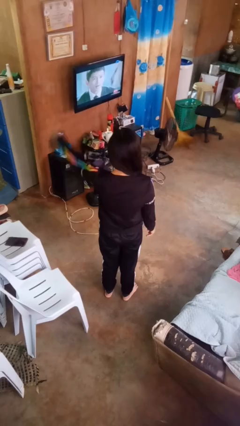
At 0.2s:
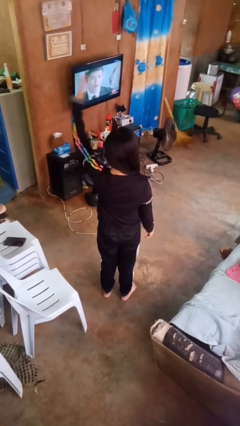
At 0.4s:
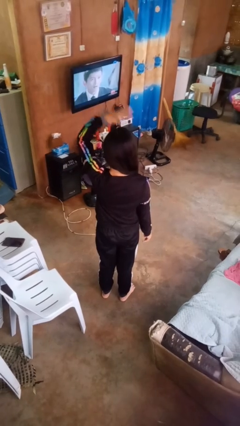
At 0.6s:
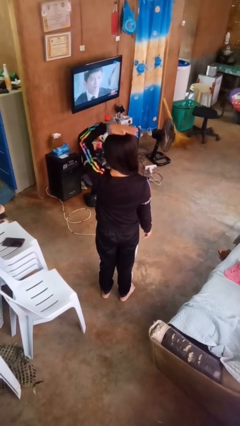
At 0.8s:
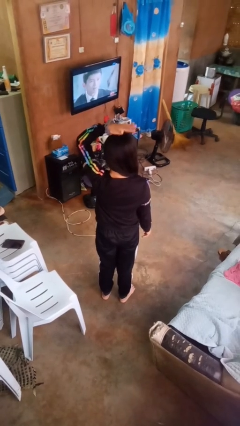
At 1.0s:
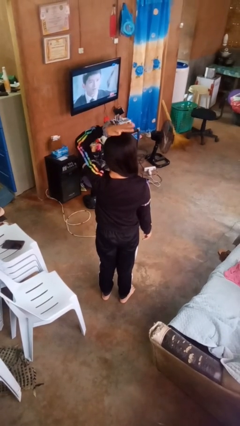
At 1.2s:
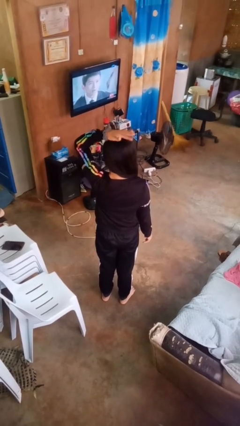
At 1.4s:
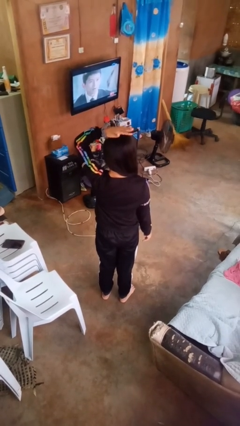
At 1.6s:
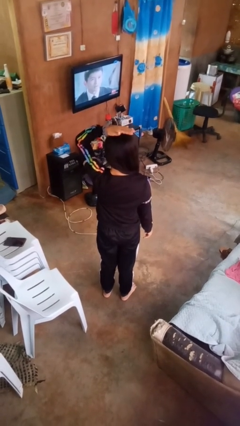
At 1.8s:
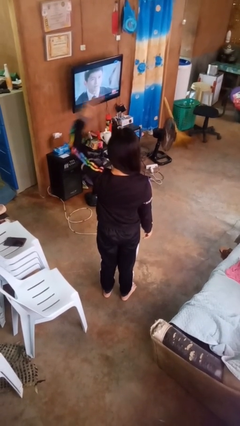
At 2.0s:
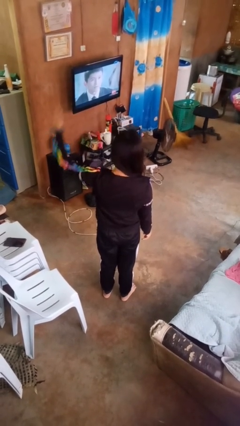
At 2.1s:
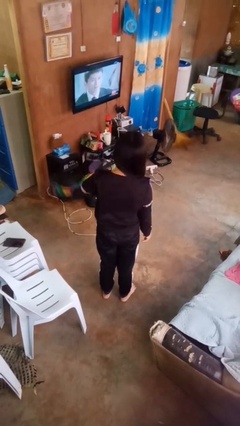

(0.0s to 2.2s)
person pats head

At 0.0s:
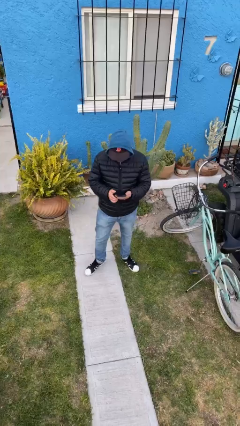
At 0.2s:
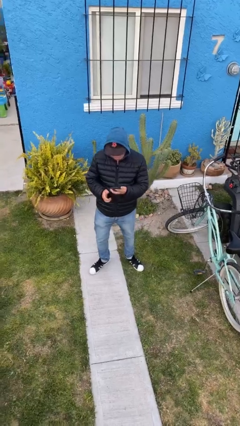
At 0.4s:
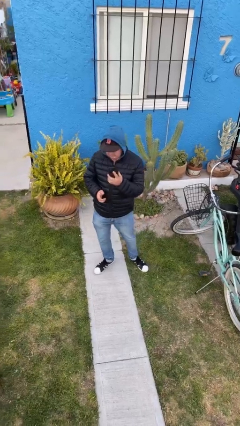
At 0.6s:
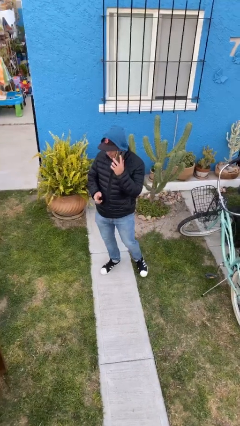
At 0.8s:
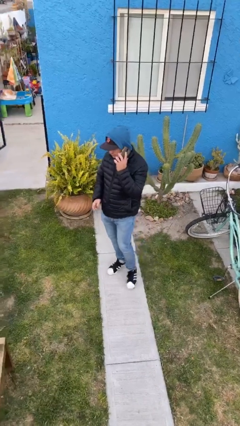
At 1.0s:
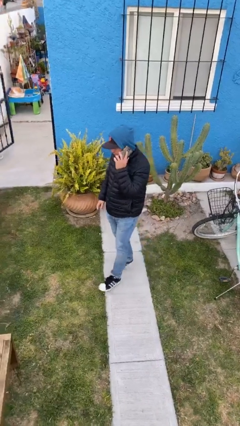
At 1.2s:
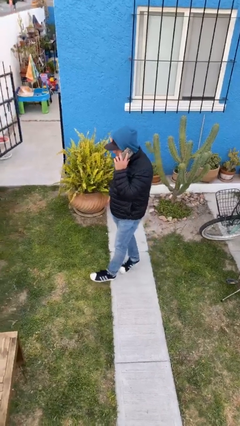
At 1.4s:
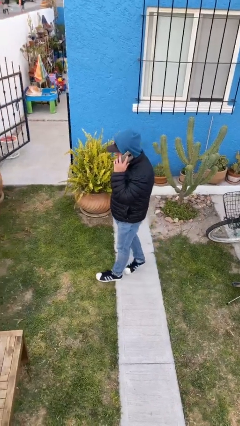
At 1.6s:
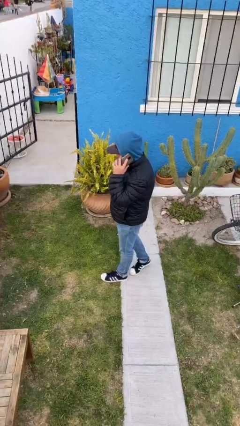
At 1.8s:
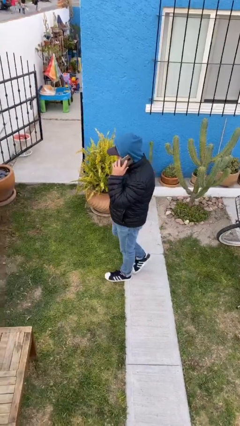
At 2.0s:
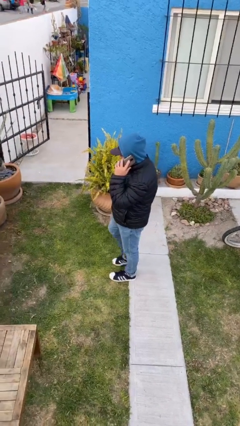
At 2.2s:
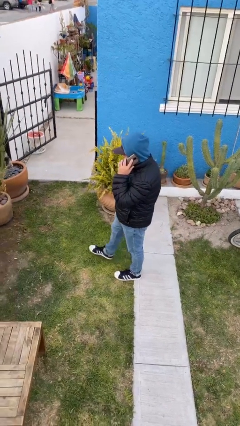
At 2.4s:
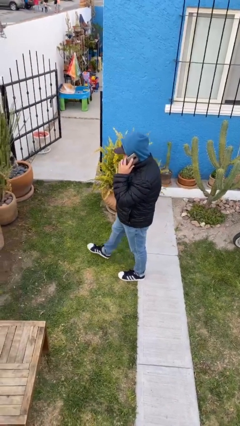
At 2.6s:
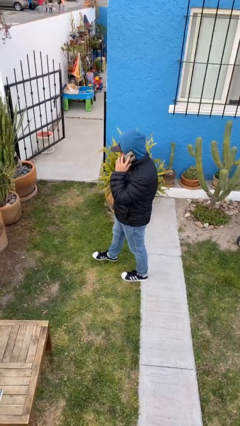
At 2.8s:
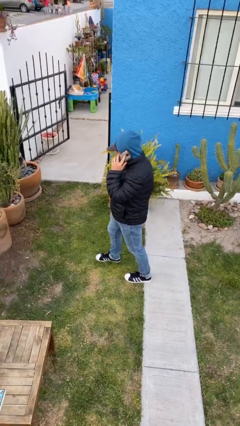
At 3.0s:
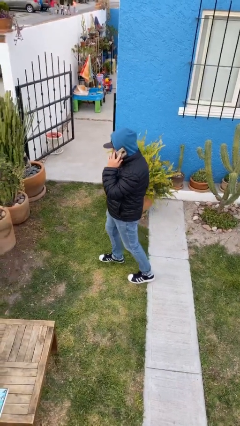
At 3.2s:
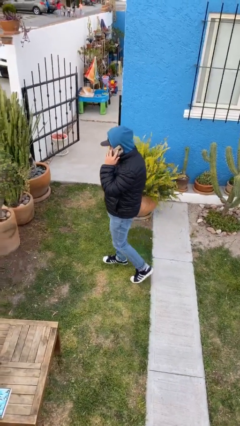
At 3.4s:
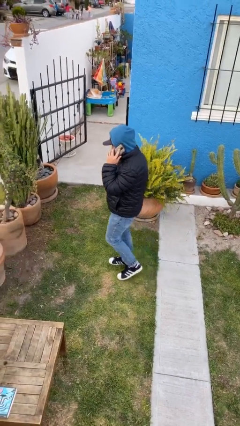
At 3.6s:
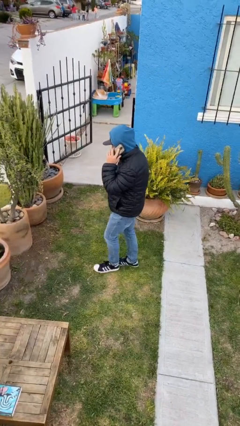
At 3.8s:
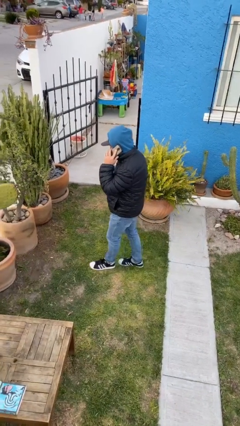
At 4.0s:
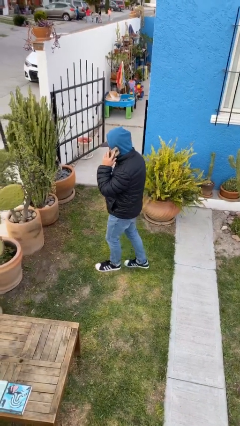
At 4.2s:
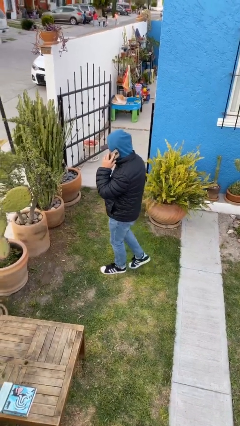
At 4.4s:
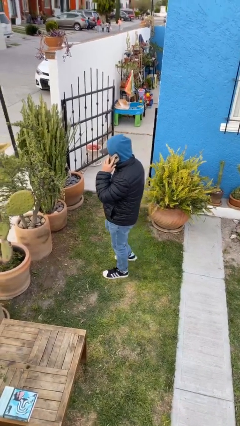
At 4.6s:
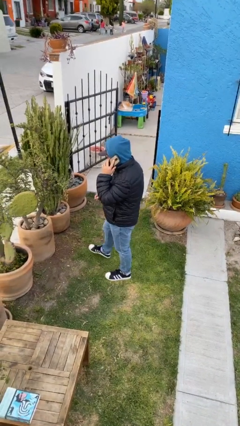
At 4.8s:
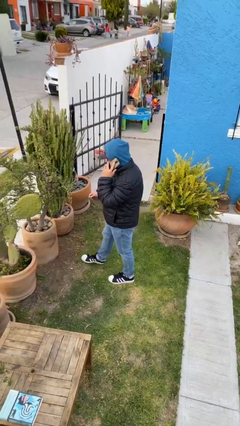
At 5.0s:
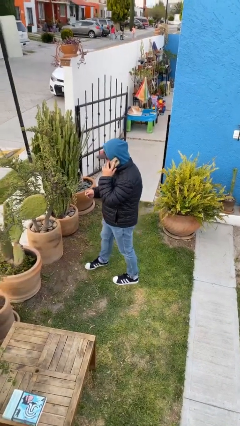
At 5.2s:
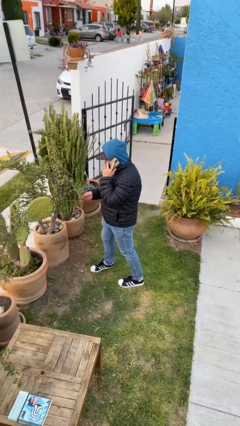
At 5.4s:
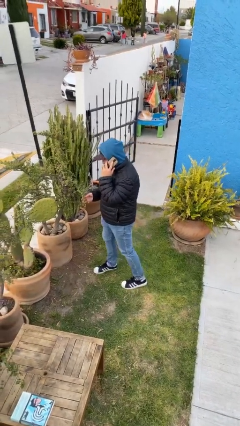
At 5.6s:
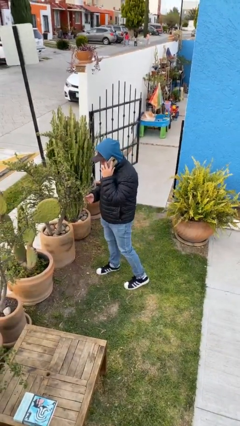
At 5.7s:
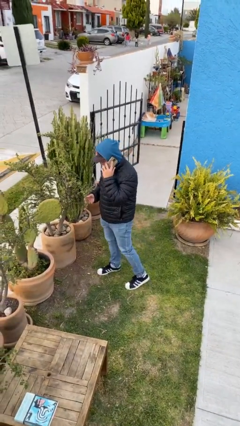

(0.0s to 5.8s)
person talks on phone

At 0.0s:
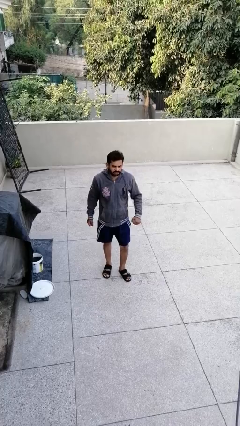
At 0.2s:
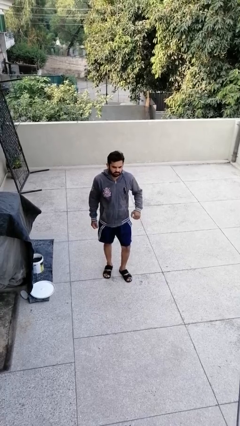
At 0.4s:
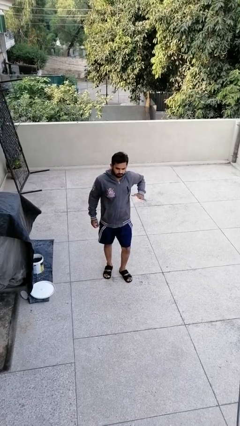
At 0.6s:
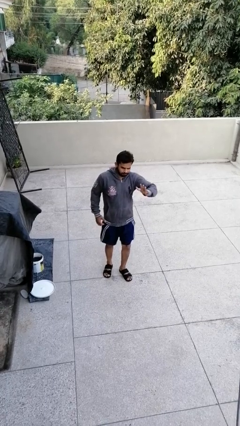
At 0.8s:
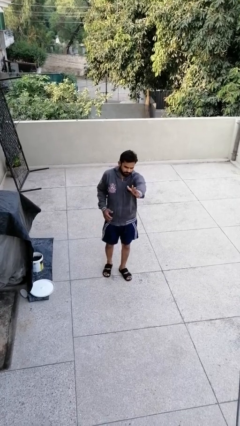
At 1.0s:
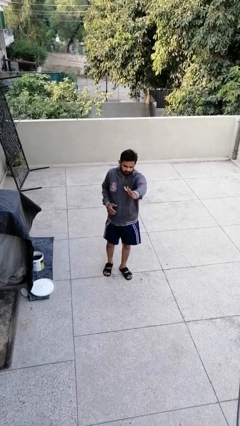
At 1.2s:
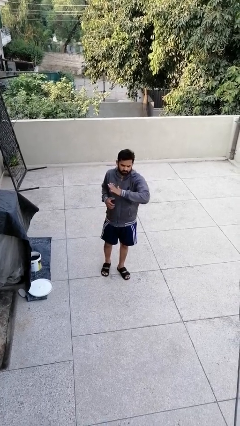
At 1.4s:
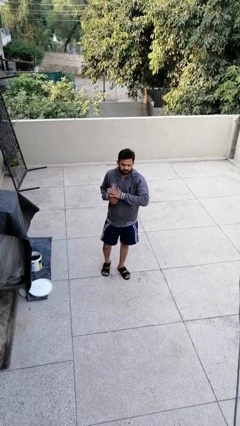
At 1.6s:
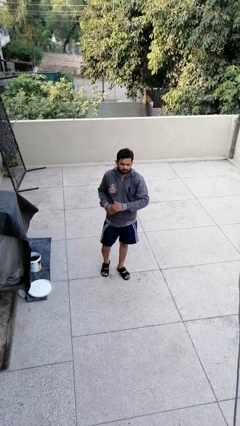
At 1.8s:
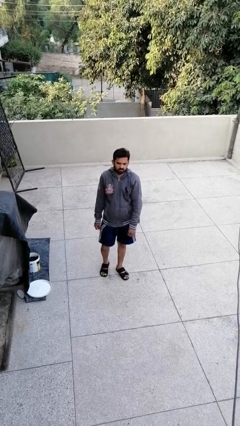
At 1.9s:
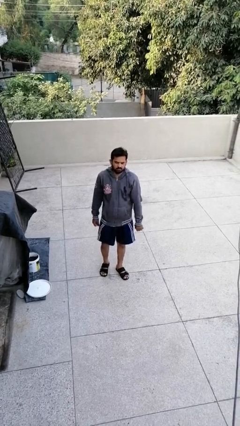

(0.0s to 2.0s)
person karate chop

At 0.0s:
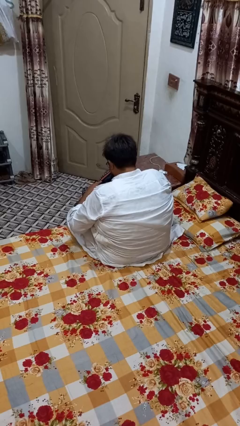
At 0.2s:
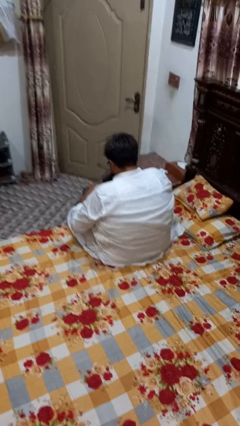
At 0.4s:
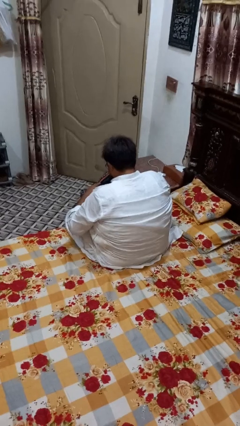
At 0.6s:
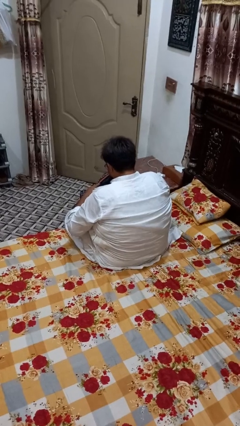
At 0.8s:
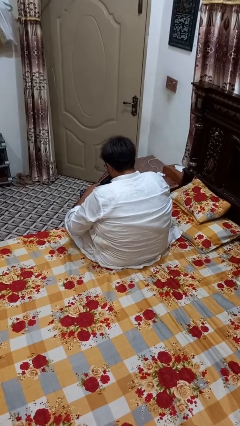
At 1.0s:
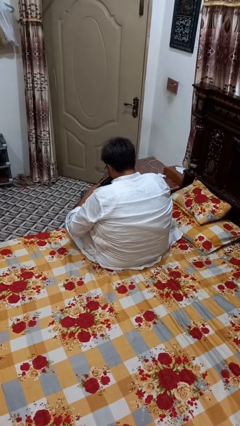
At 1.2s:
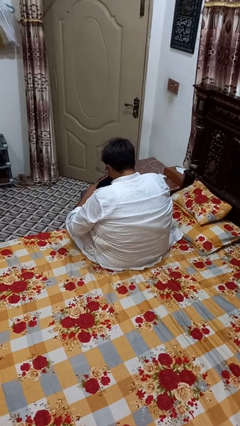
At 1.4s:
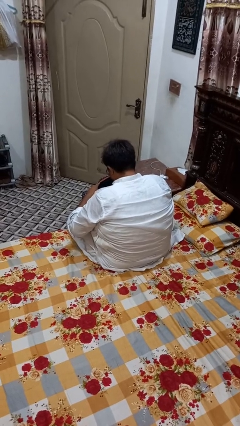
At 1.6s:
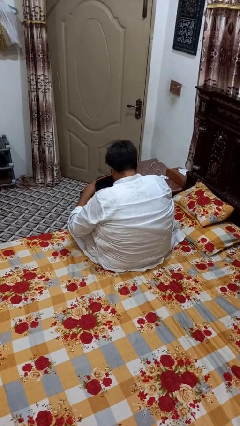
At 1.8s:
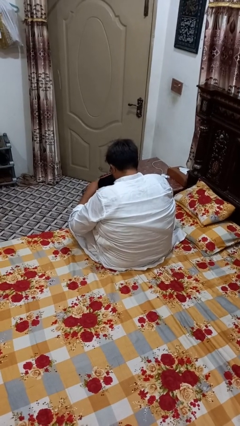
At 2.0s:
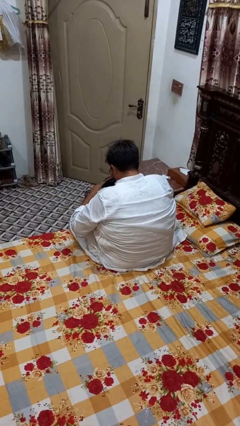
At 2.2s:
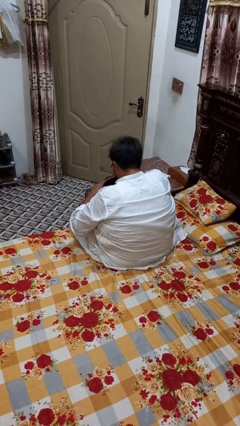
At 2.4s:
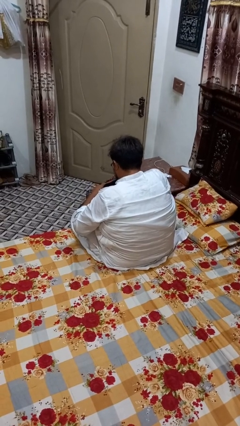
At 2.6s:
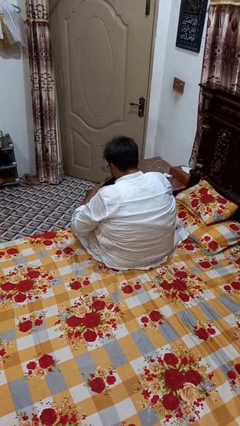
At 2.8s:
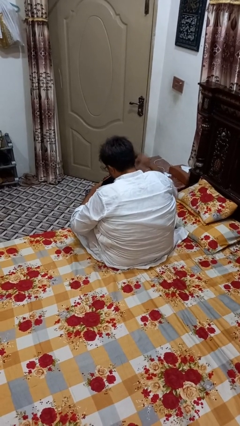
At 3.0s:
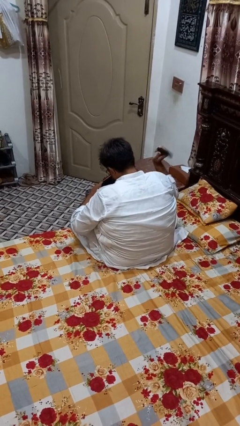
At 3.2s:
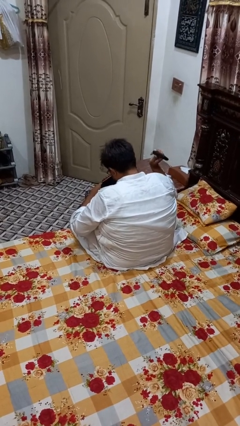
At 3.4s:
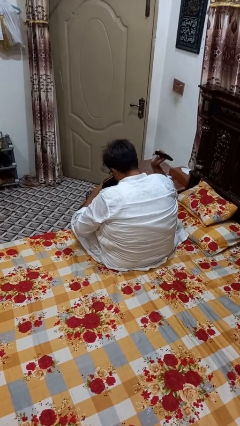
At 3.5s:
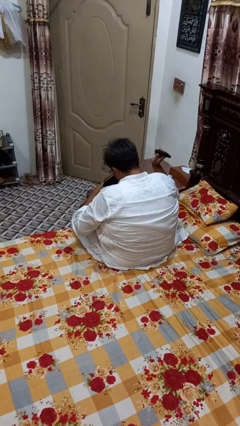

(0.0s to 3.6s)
person takes object from bag

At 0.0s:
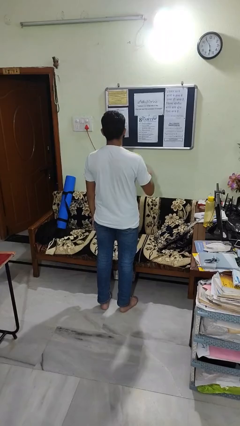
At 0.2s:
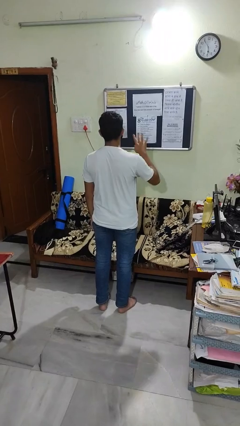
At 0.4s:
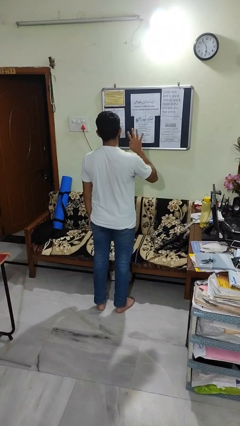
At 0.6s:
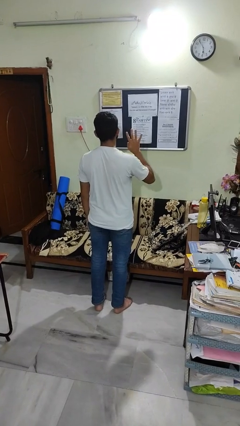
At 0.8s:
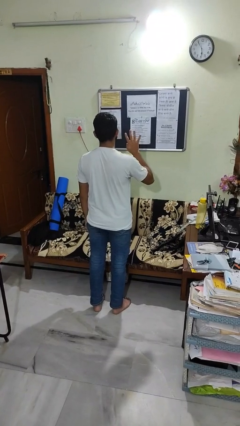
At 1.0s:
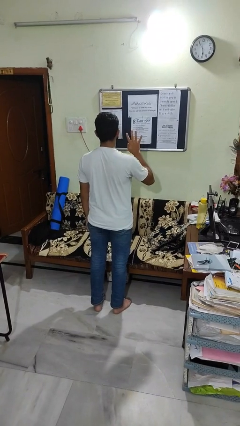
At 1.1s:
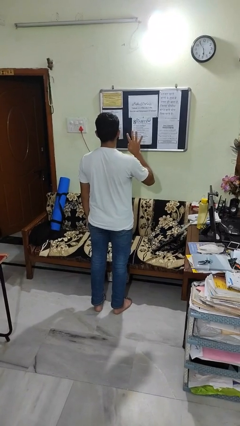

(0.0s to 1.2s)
person gestures number four

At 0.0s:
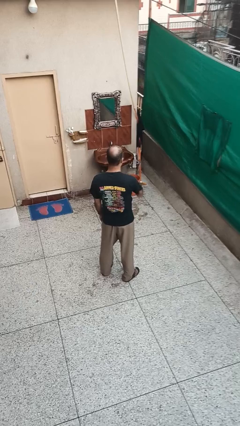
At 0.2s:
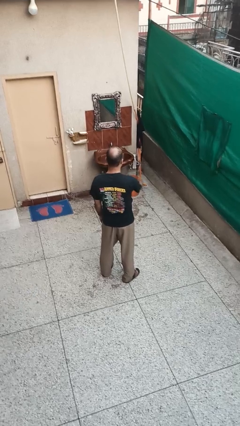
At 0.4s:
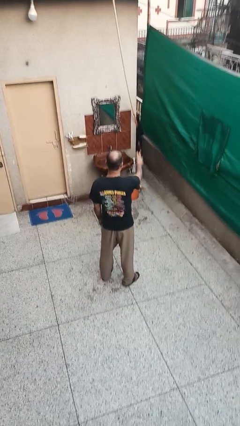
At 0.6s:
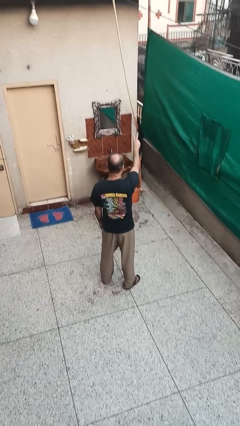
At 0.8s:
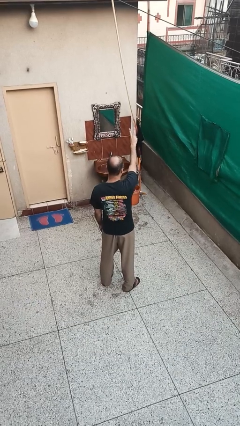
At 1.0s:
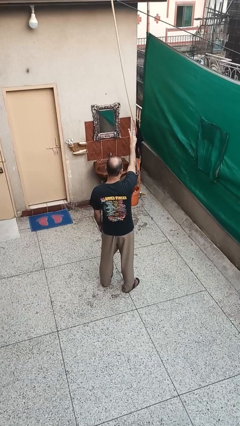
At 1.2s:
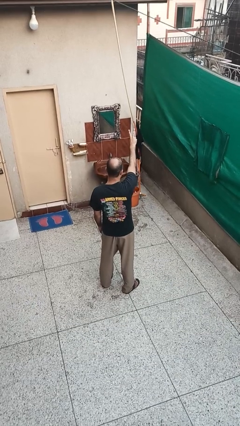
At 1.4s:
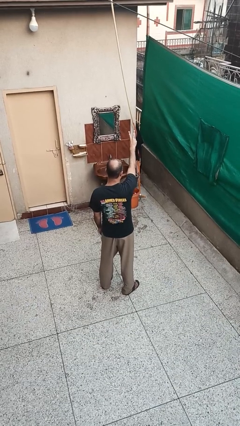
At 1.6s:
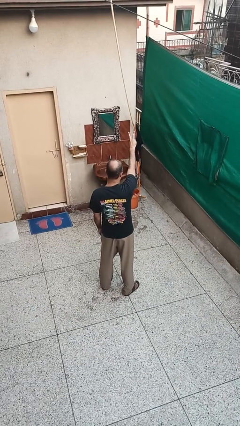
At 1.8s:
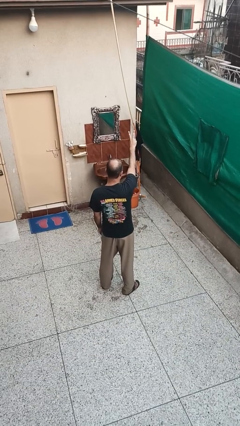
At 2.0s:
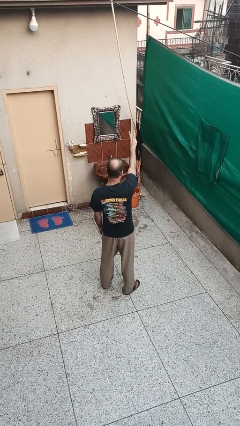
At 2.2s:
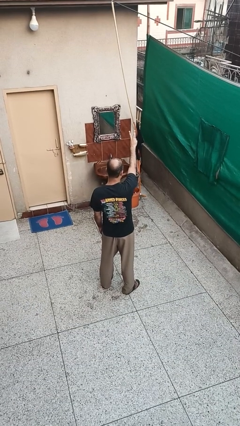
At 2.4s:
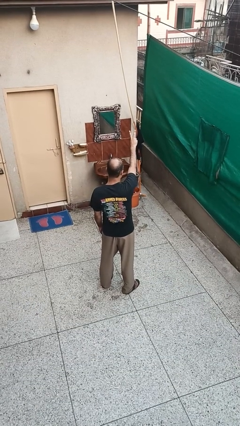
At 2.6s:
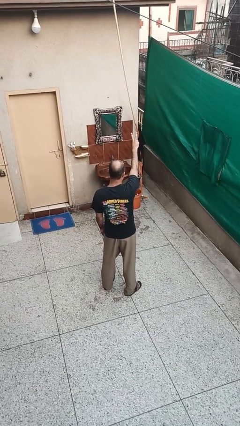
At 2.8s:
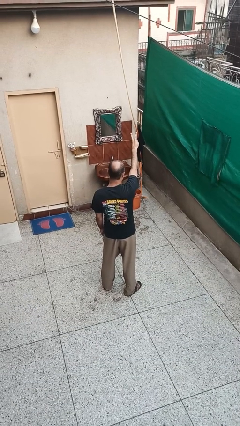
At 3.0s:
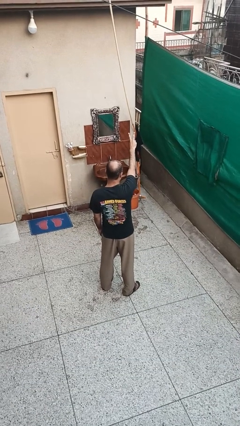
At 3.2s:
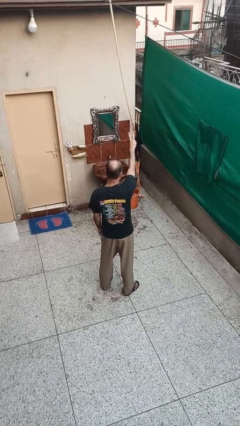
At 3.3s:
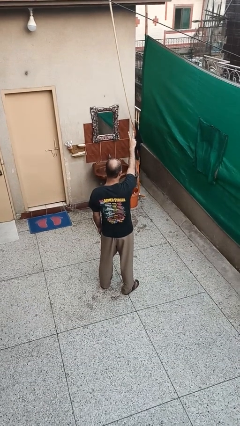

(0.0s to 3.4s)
person gestures peace
